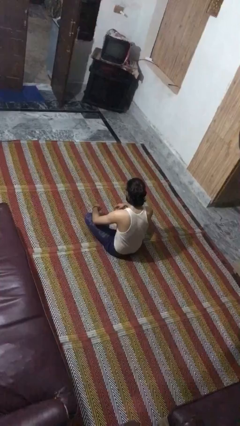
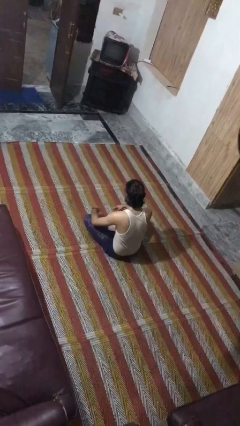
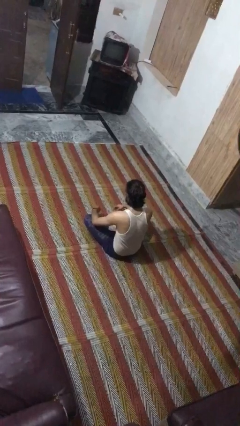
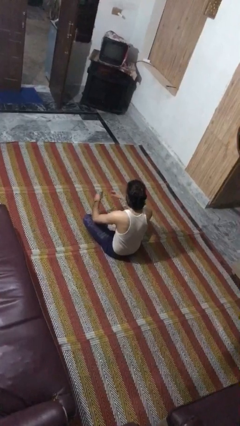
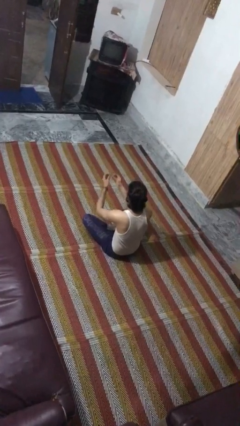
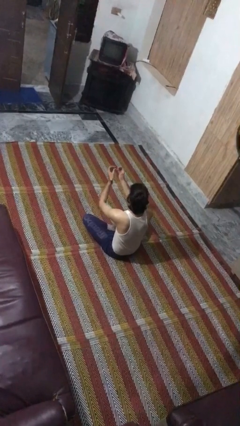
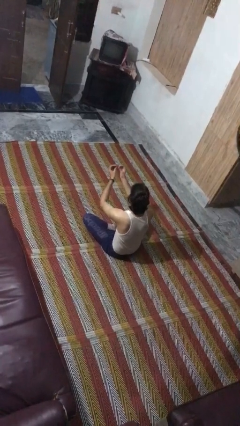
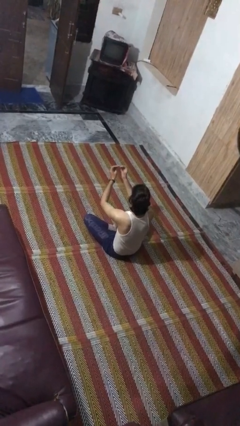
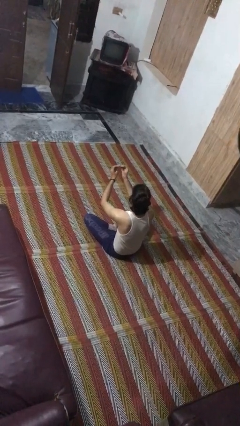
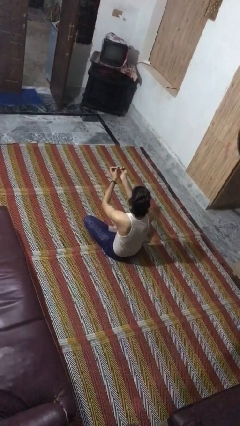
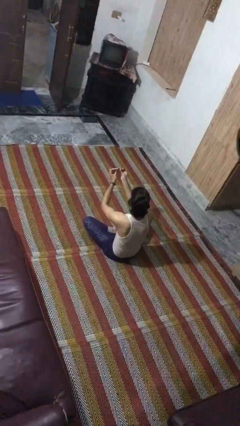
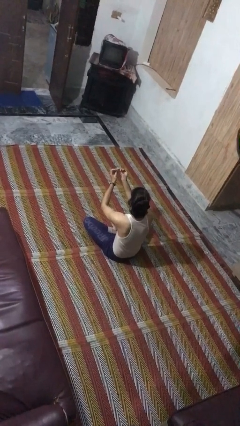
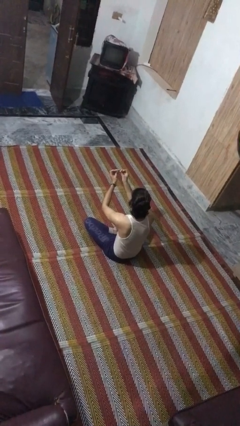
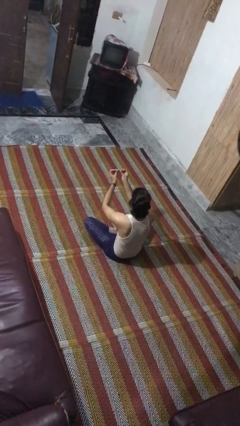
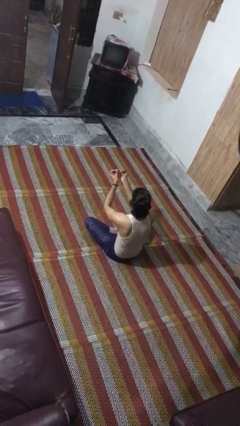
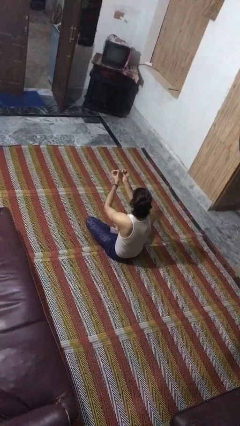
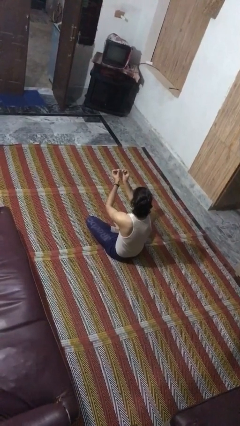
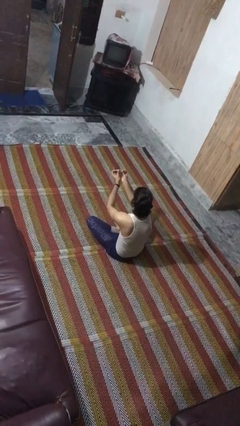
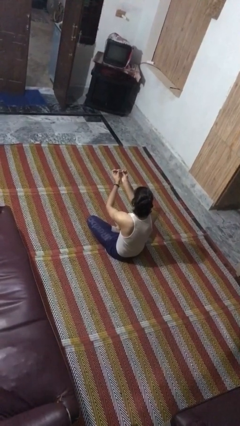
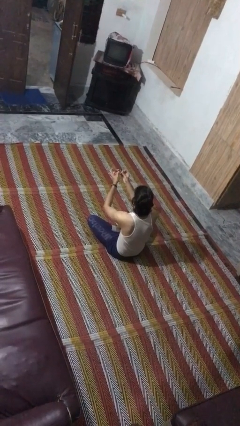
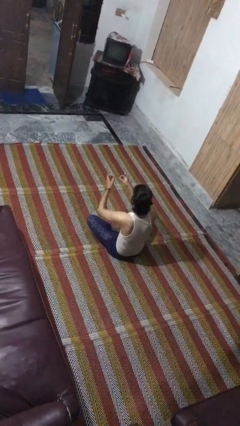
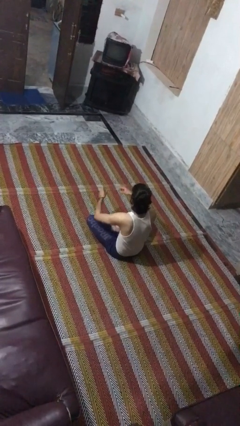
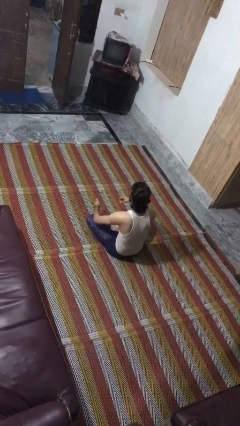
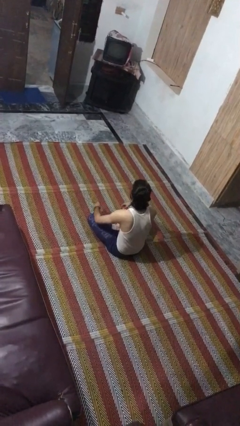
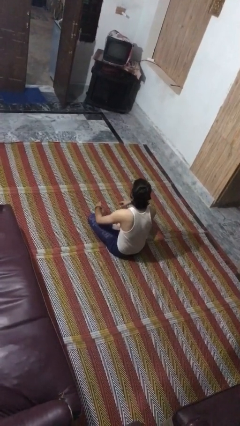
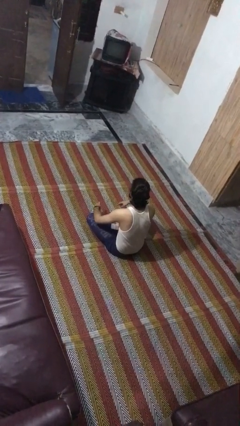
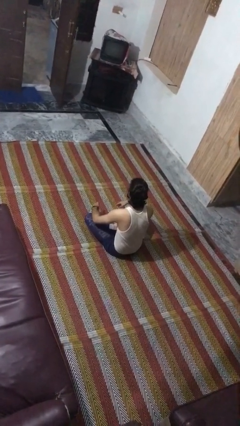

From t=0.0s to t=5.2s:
person clips fingernails

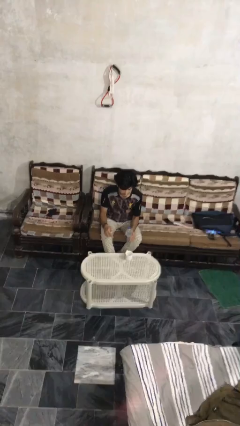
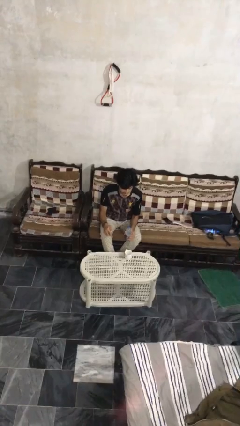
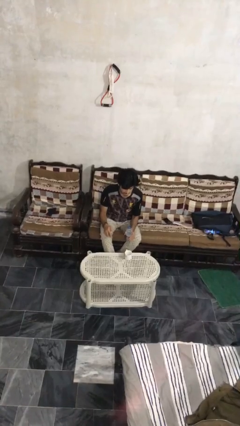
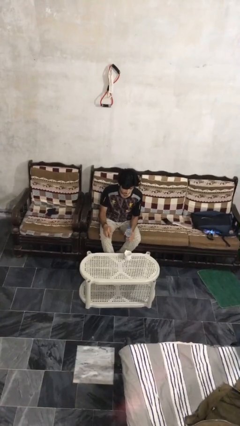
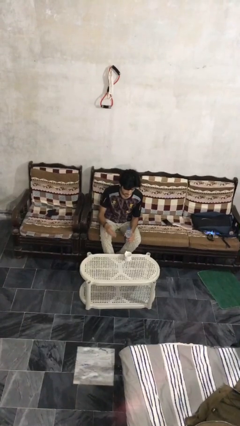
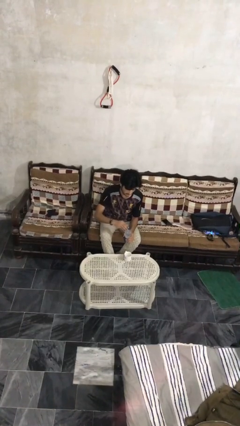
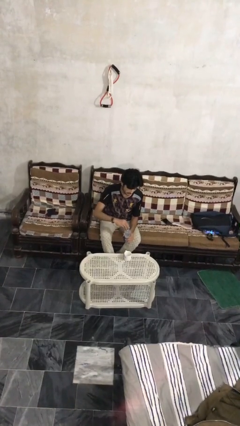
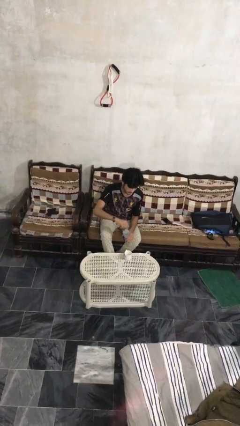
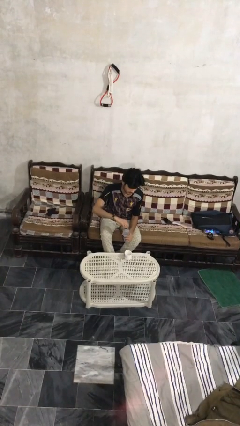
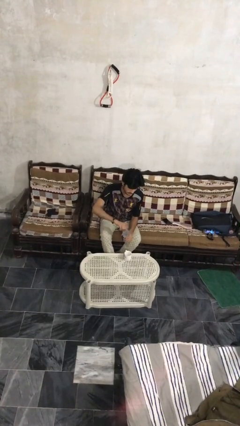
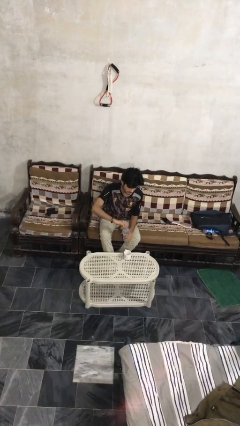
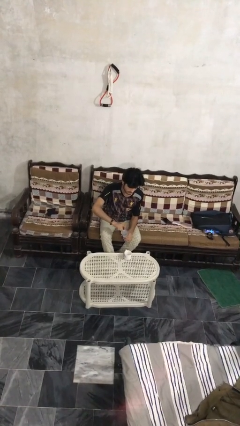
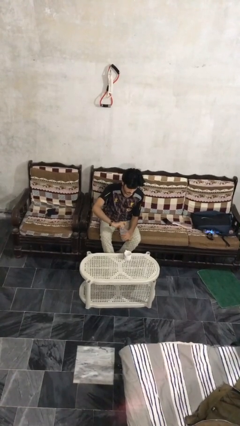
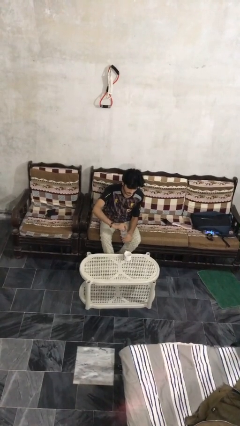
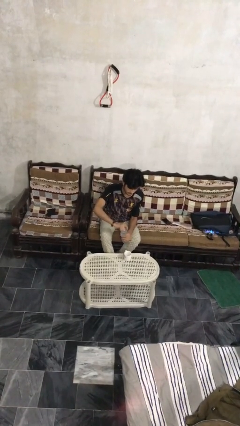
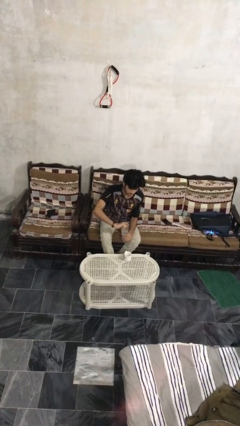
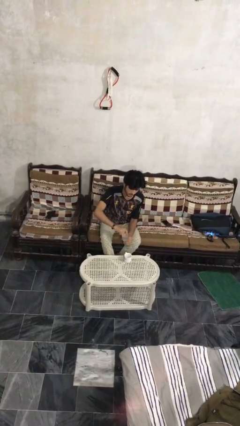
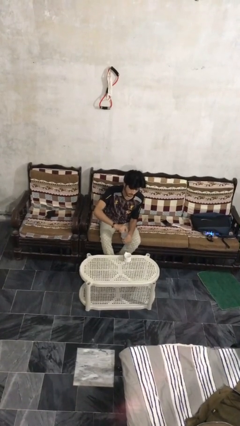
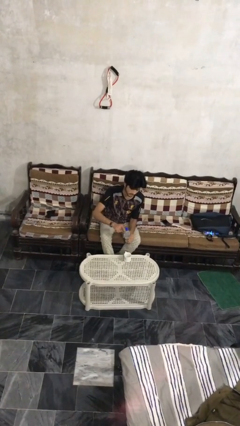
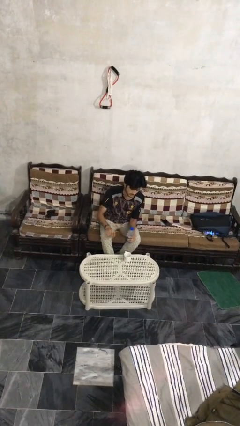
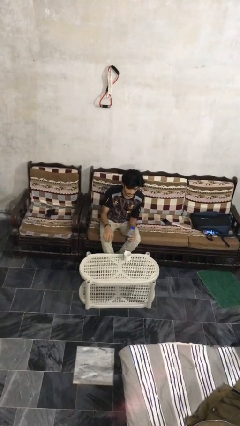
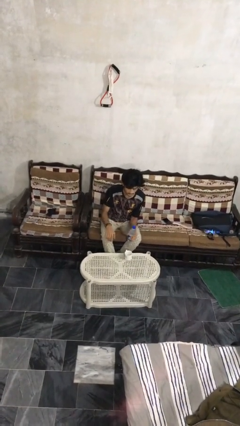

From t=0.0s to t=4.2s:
person screws lid to bottle

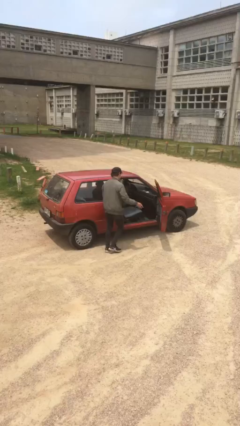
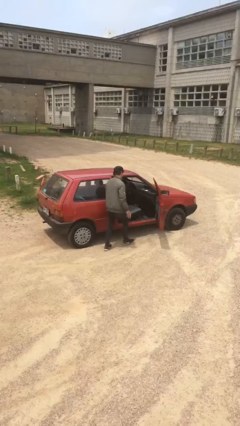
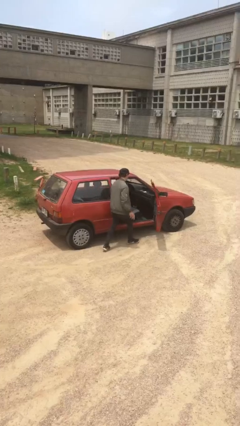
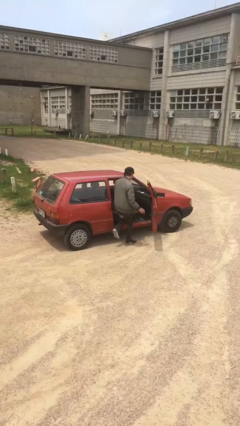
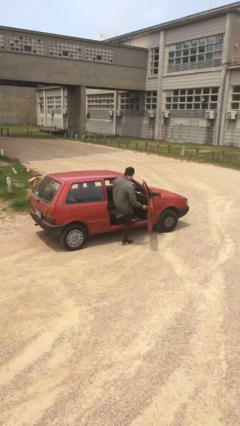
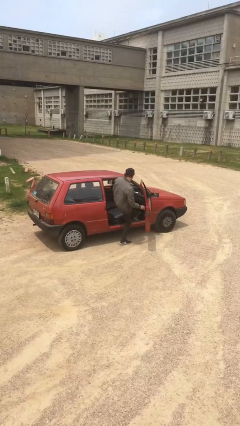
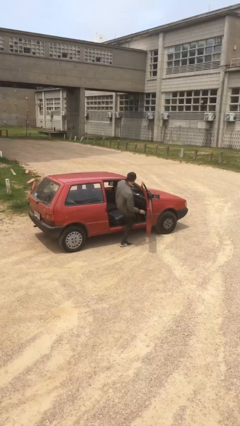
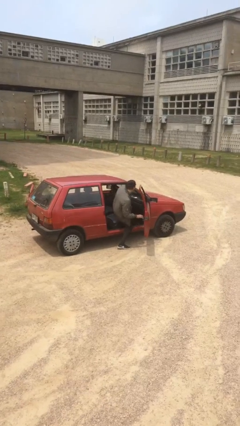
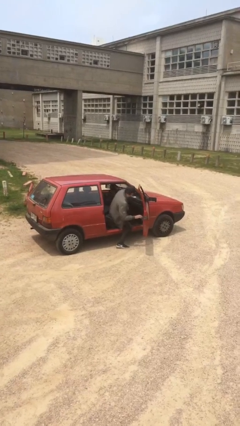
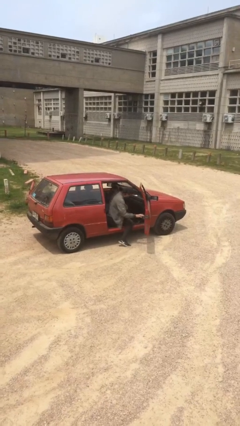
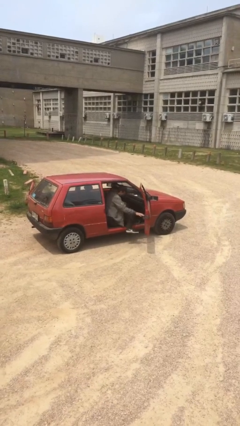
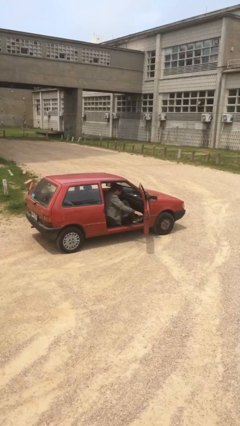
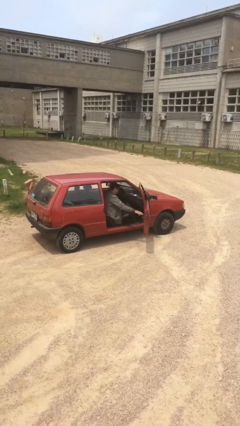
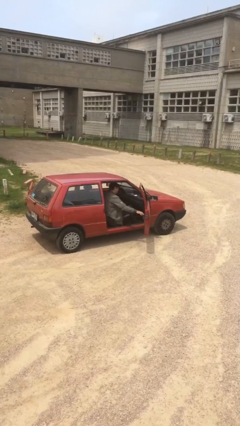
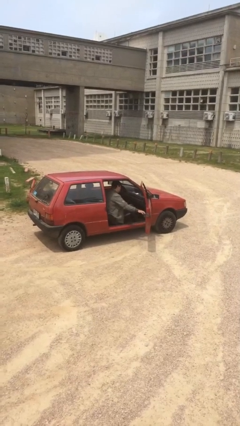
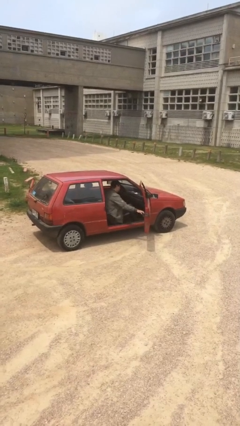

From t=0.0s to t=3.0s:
person enters car

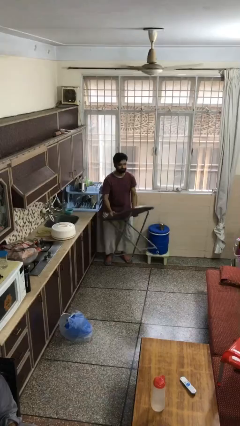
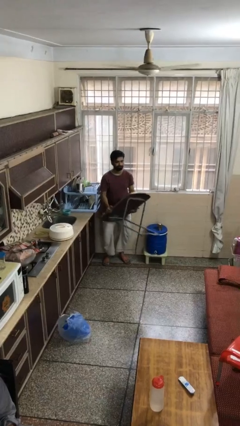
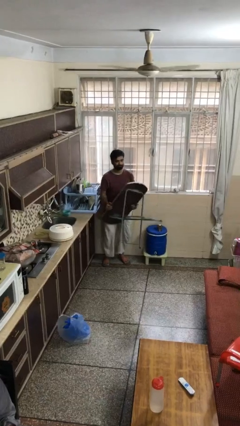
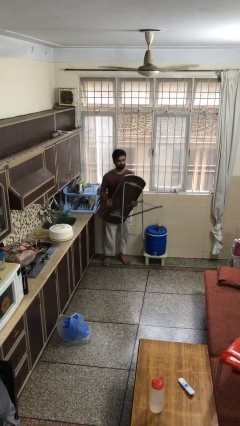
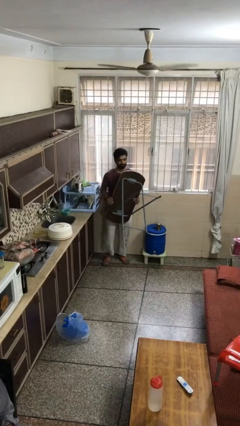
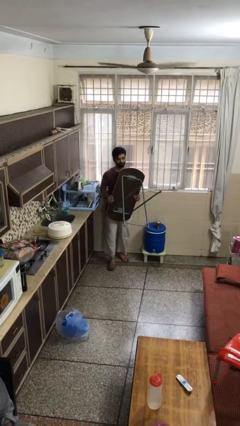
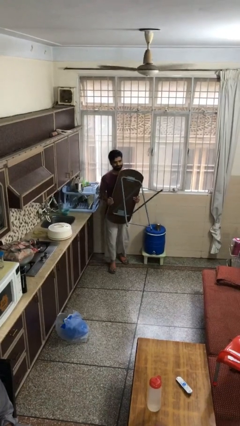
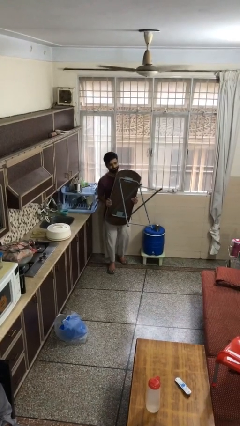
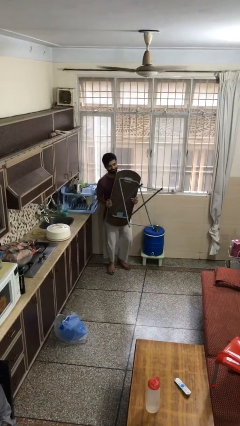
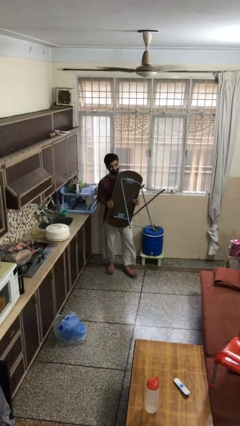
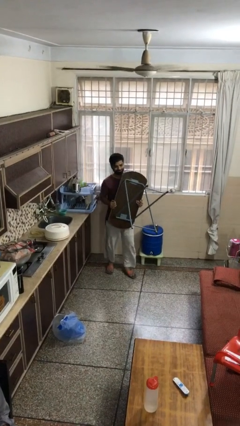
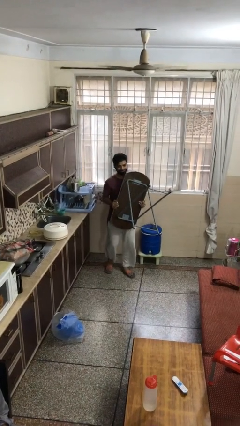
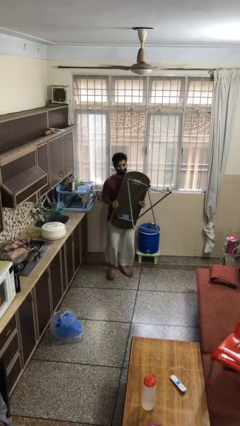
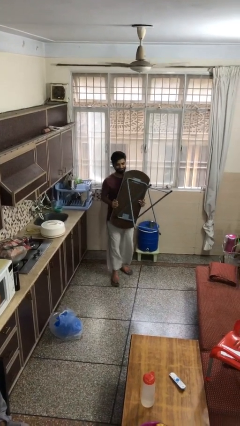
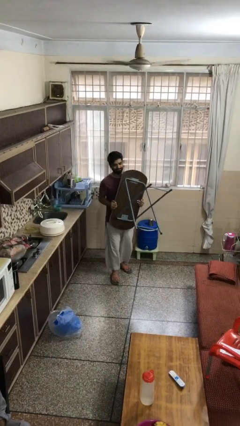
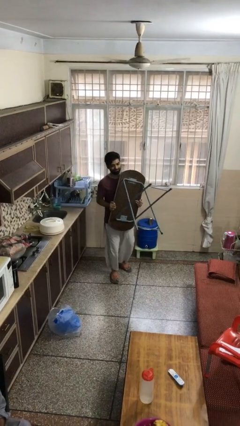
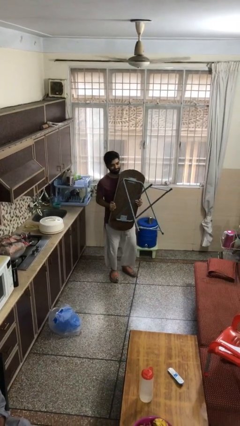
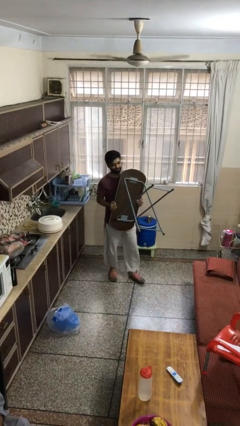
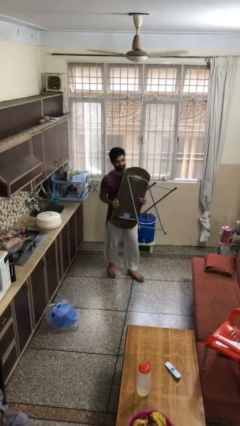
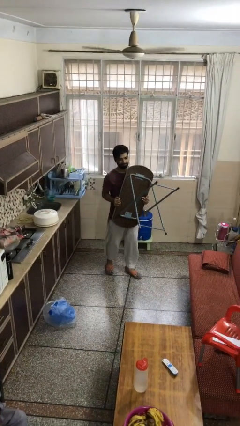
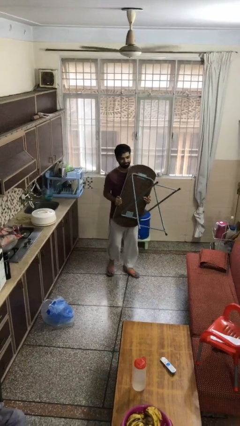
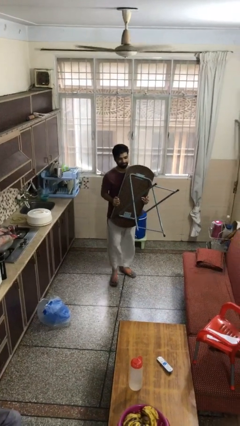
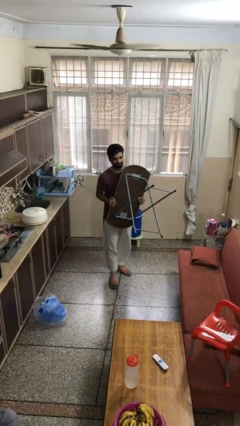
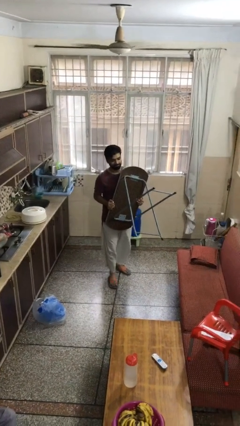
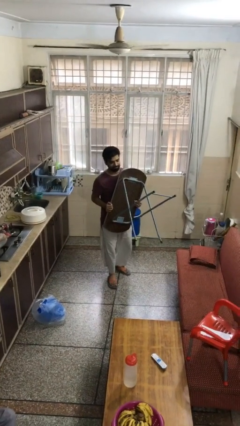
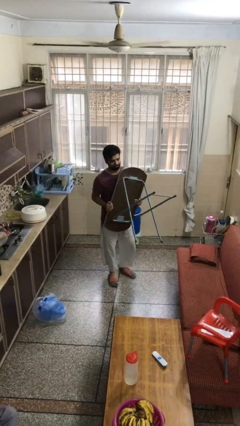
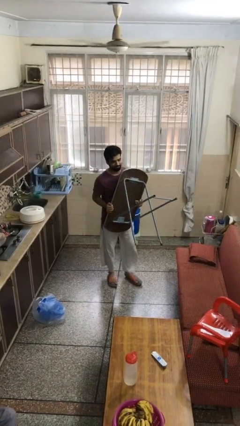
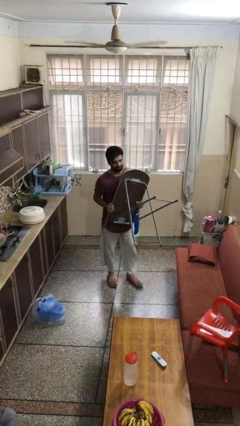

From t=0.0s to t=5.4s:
person carries heavy object
